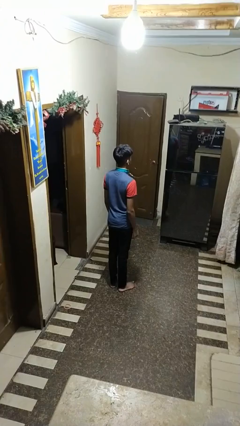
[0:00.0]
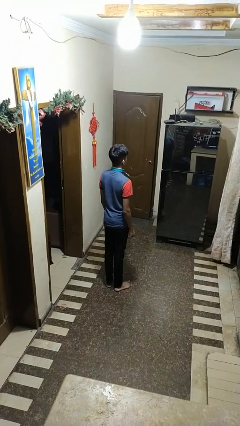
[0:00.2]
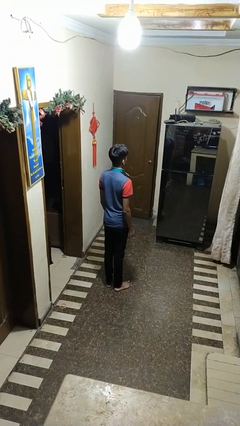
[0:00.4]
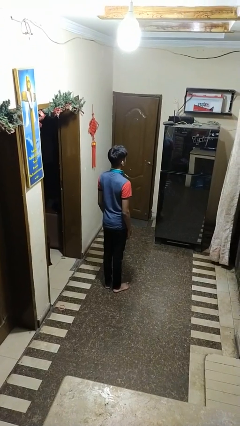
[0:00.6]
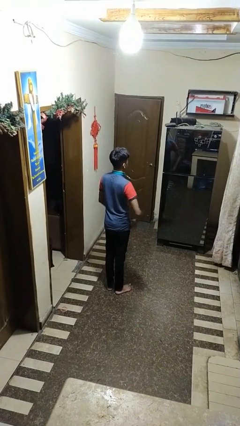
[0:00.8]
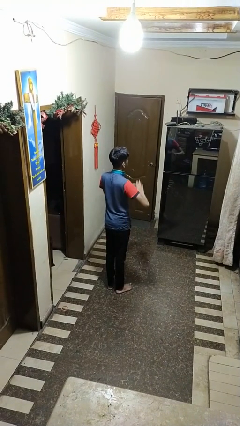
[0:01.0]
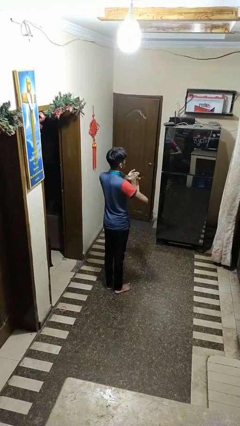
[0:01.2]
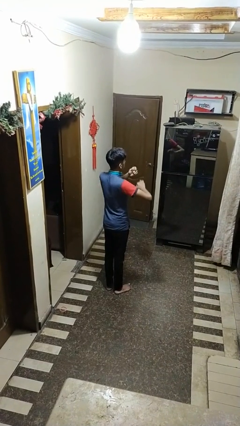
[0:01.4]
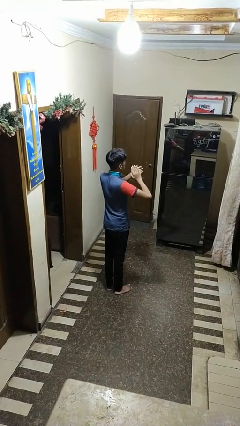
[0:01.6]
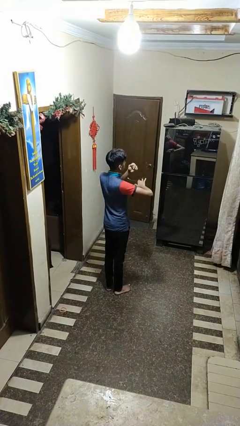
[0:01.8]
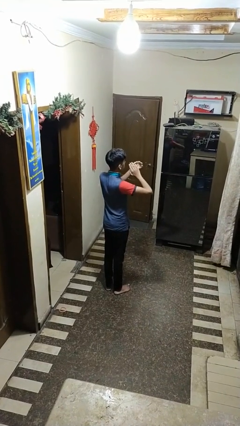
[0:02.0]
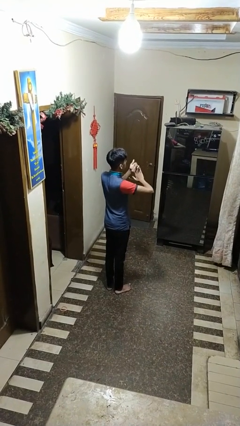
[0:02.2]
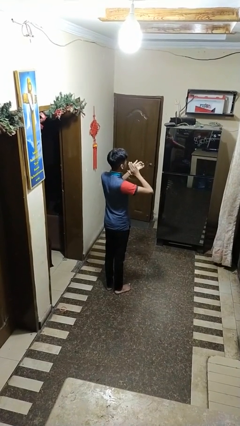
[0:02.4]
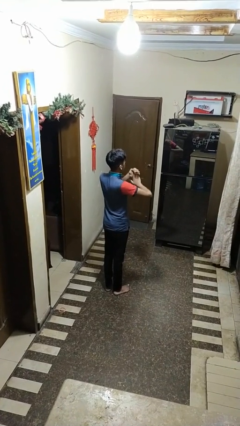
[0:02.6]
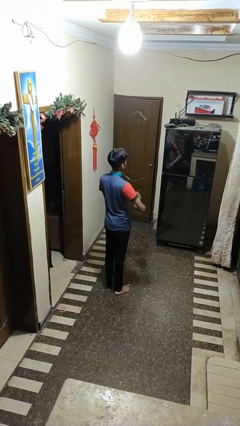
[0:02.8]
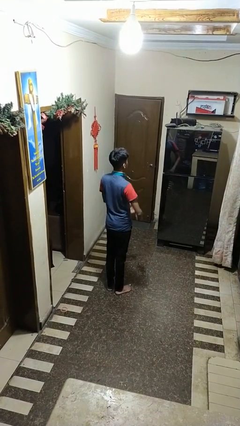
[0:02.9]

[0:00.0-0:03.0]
person claps hands

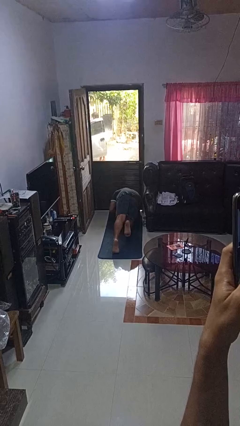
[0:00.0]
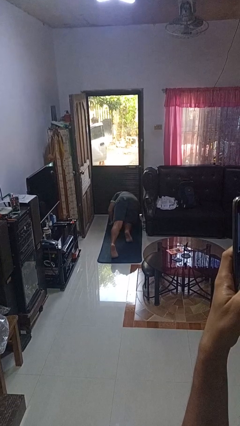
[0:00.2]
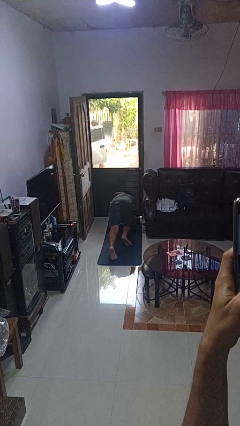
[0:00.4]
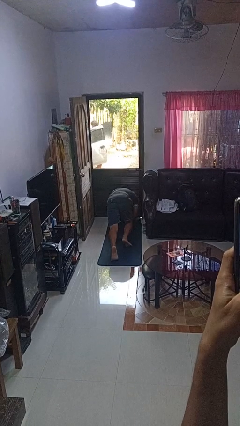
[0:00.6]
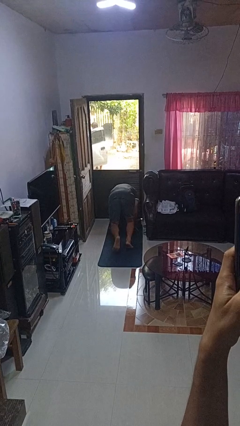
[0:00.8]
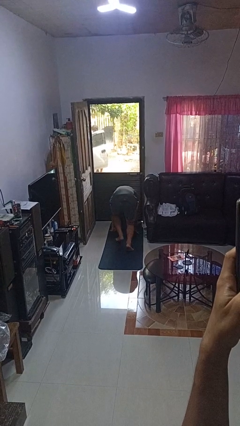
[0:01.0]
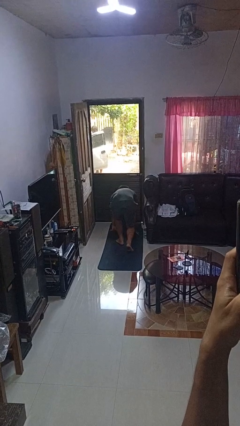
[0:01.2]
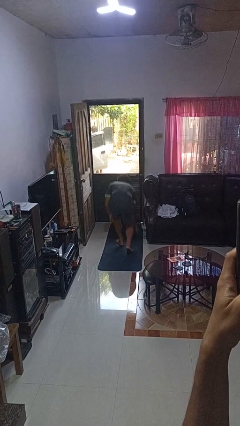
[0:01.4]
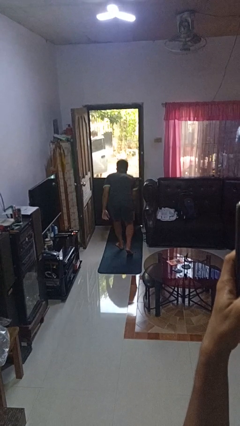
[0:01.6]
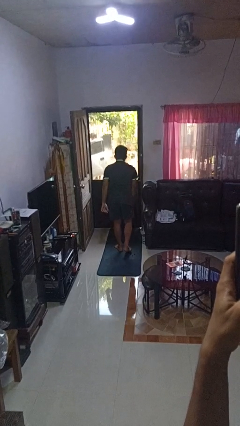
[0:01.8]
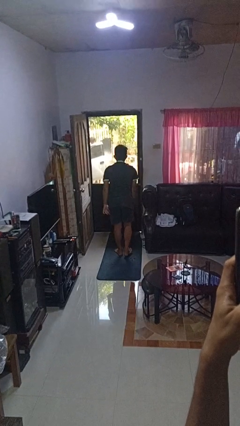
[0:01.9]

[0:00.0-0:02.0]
person stands up from floor

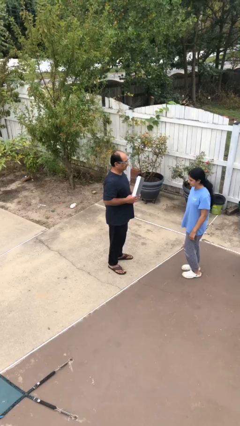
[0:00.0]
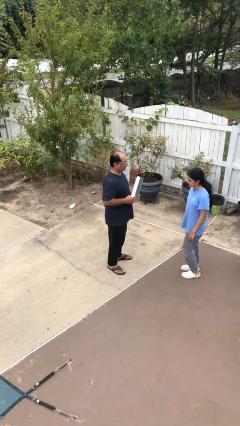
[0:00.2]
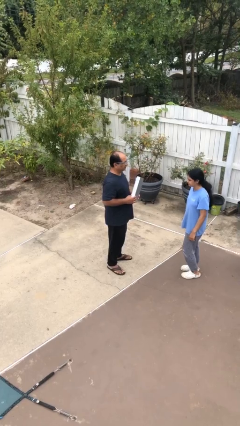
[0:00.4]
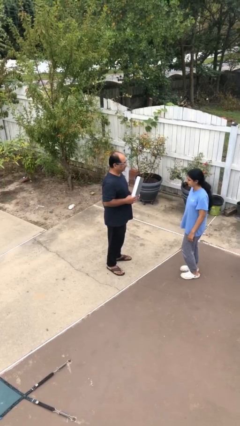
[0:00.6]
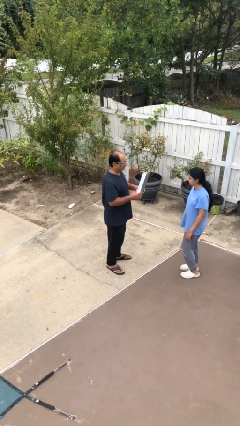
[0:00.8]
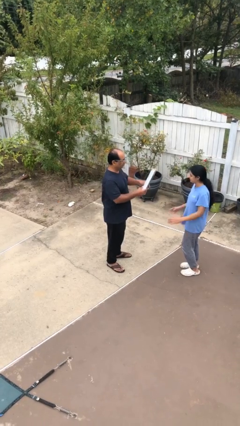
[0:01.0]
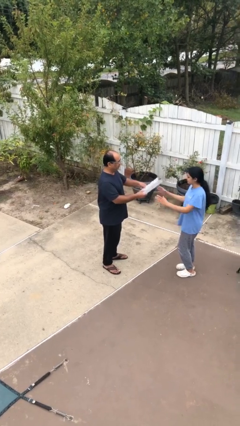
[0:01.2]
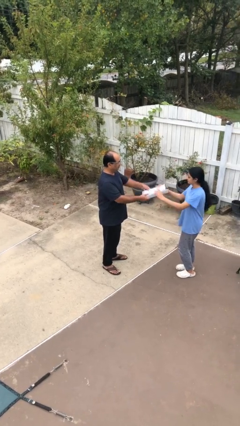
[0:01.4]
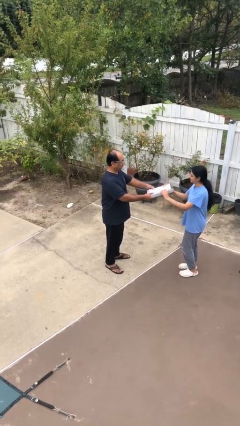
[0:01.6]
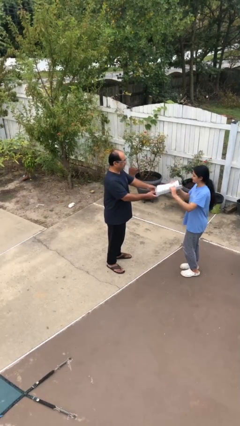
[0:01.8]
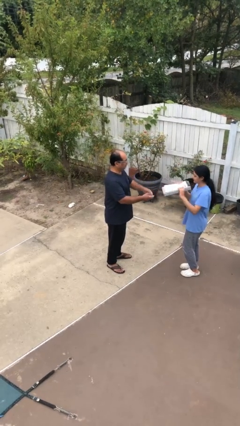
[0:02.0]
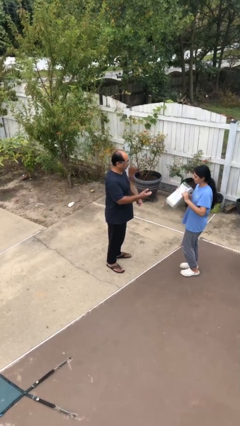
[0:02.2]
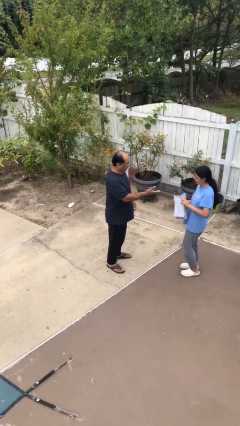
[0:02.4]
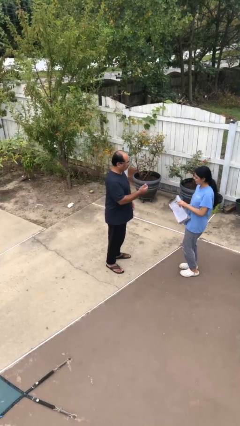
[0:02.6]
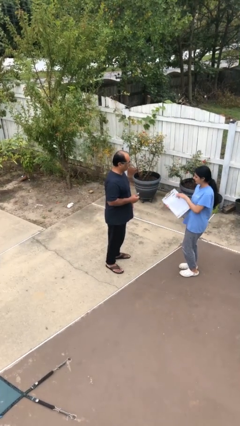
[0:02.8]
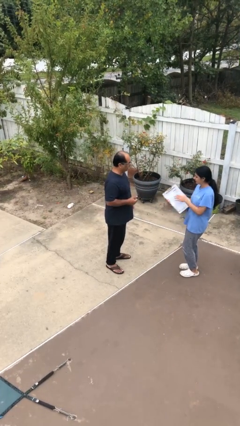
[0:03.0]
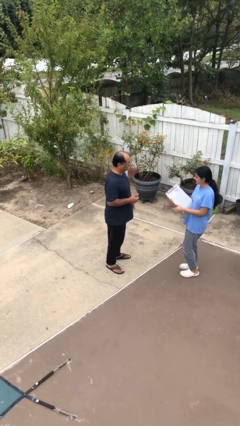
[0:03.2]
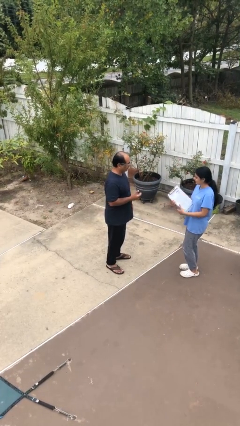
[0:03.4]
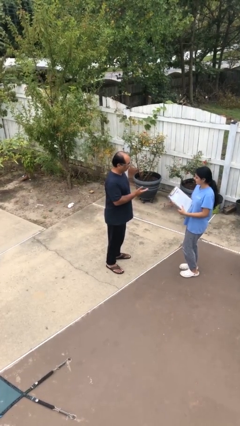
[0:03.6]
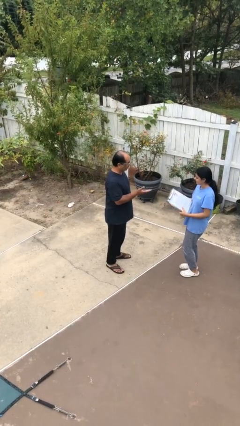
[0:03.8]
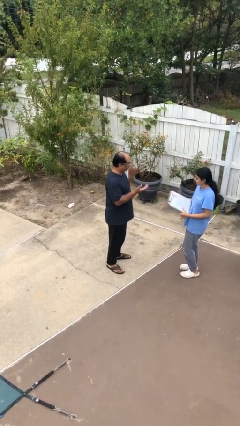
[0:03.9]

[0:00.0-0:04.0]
person transfers object to person

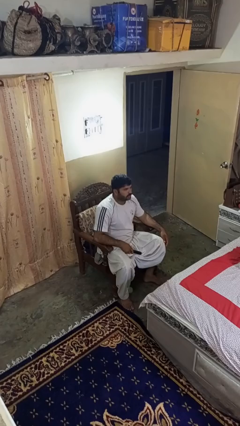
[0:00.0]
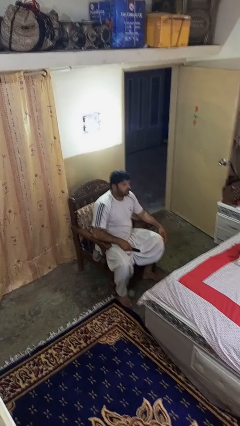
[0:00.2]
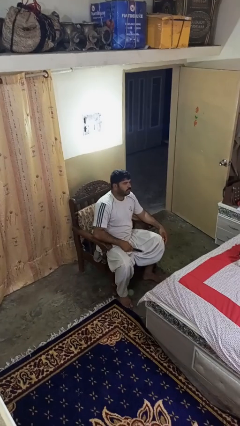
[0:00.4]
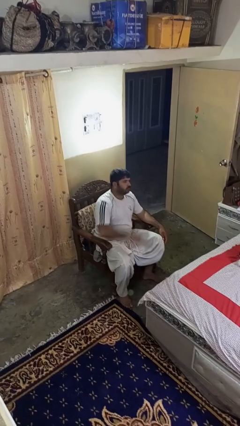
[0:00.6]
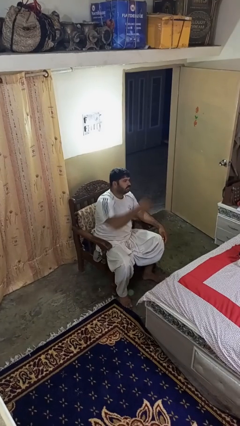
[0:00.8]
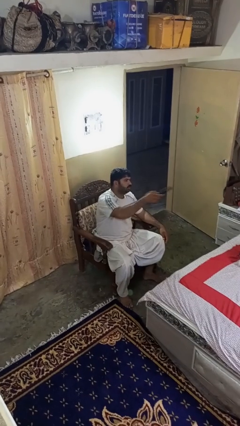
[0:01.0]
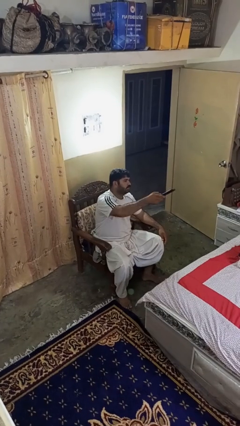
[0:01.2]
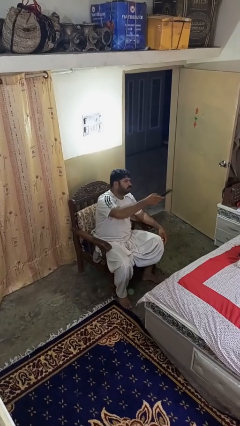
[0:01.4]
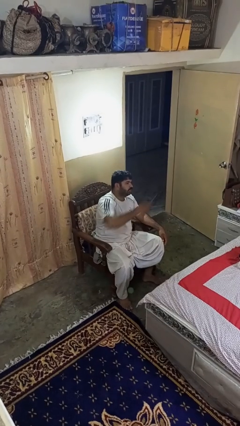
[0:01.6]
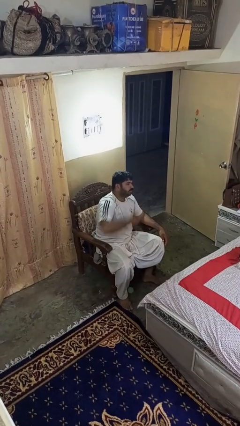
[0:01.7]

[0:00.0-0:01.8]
person uses television remote

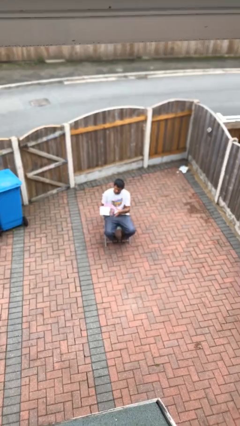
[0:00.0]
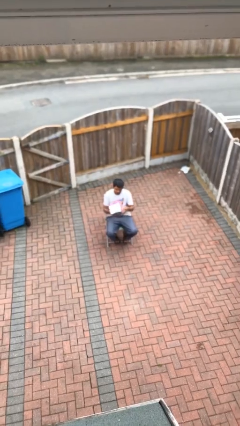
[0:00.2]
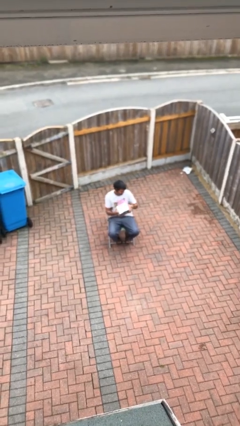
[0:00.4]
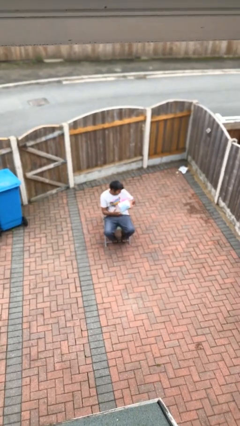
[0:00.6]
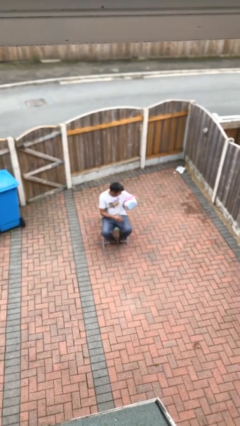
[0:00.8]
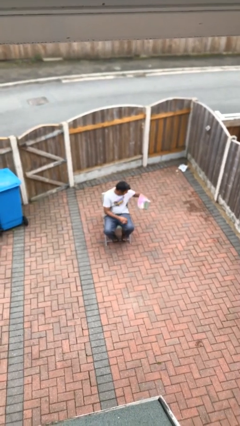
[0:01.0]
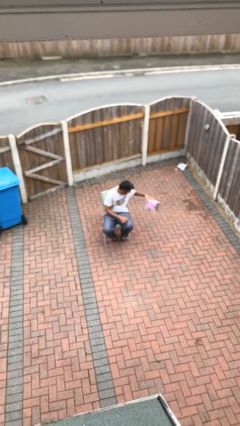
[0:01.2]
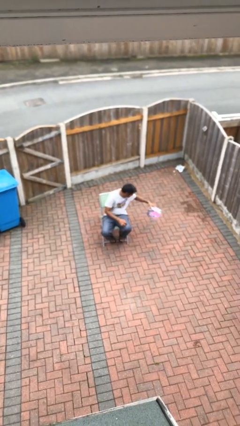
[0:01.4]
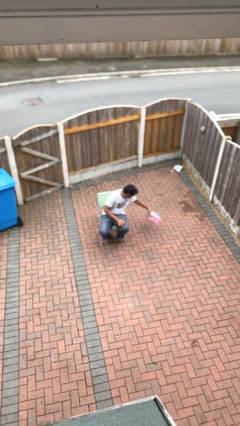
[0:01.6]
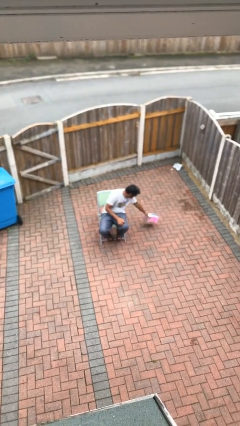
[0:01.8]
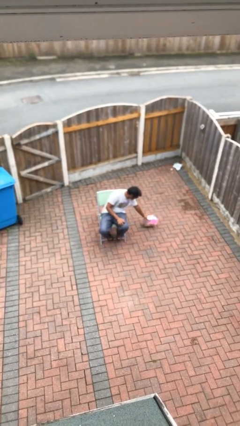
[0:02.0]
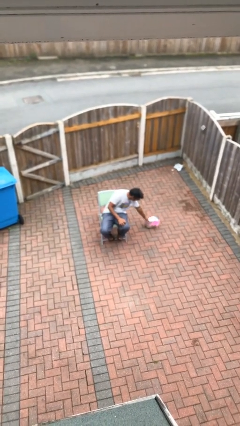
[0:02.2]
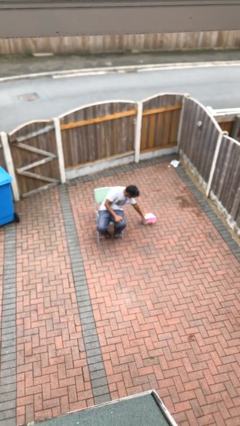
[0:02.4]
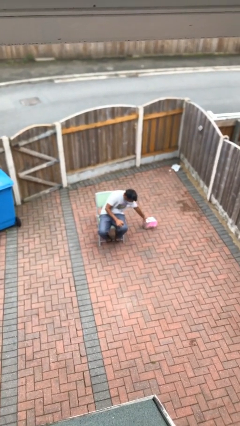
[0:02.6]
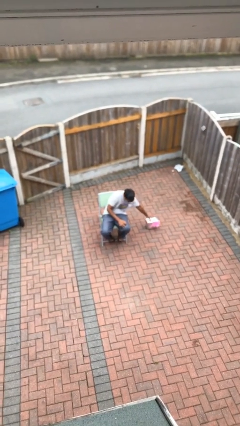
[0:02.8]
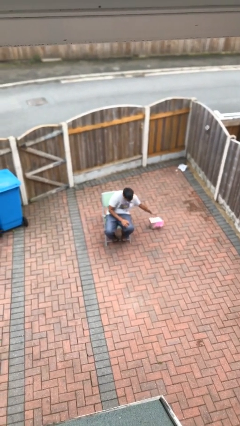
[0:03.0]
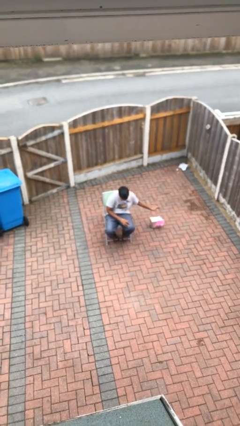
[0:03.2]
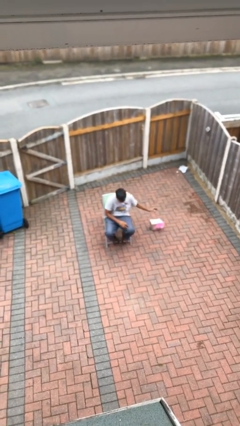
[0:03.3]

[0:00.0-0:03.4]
person puts down object on floor

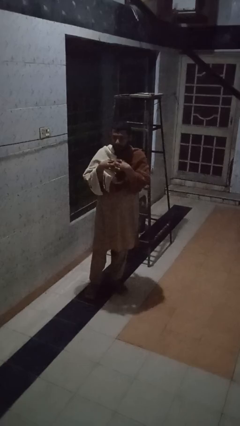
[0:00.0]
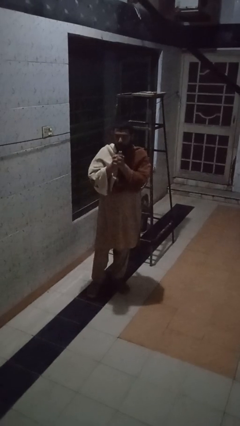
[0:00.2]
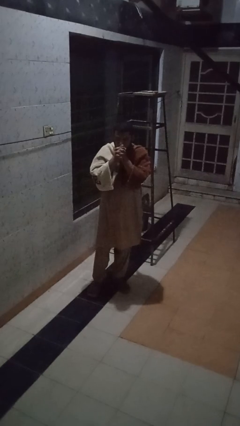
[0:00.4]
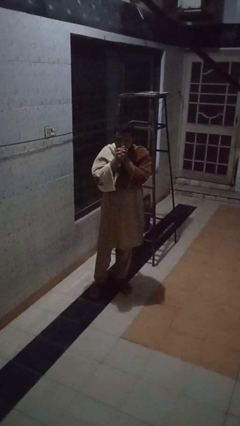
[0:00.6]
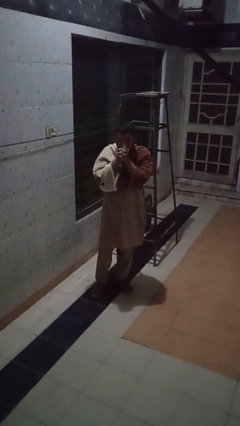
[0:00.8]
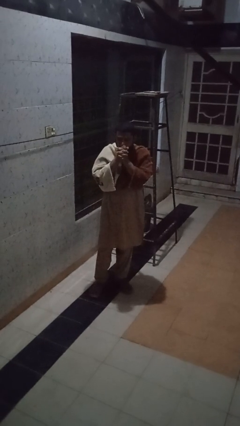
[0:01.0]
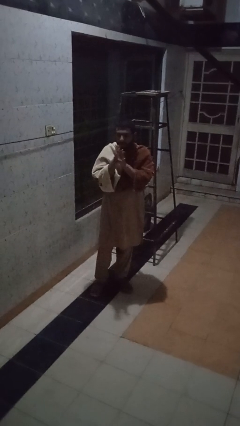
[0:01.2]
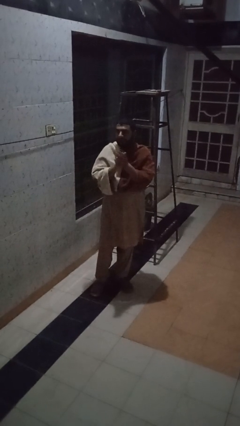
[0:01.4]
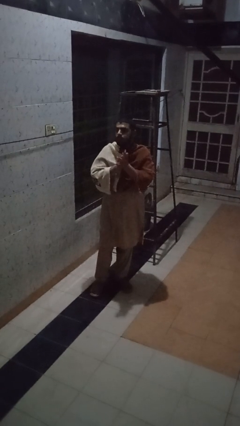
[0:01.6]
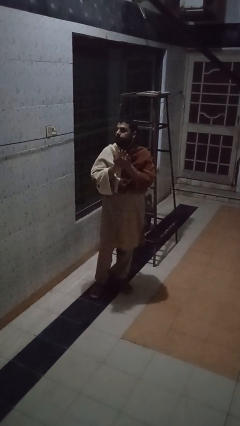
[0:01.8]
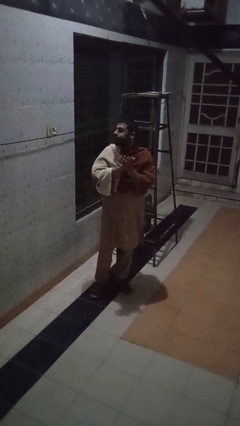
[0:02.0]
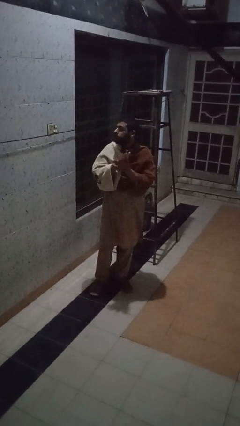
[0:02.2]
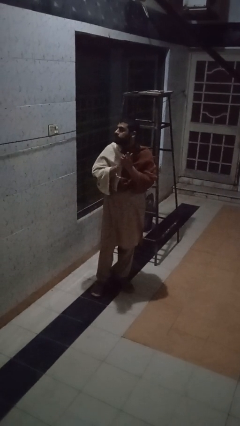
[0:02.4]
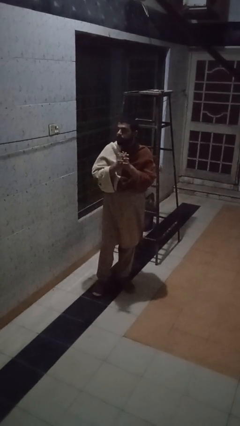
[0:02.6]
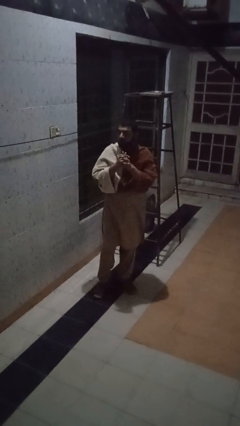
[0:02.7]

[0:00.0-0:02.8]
person blows into hands
